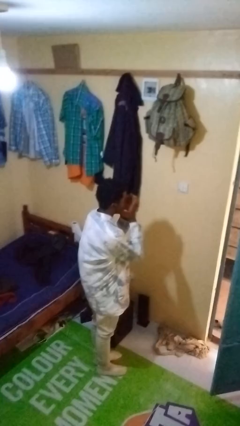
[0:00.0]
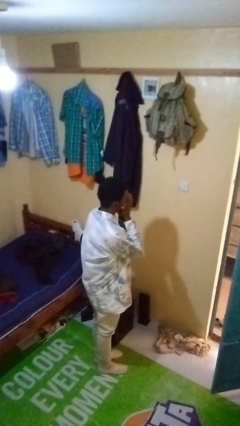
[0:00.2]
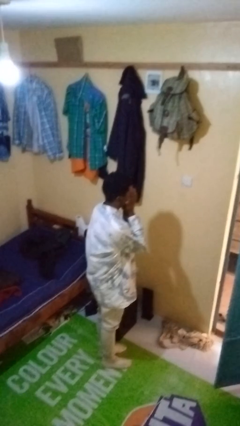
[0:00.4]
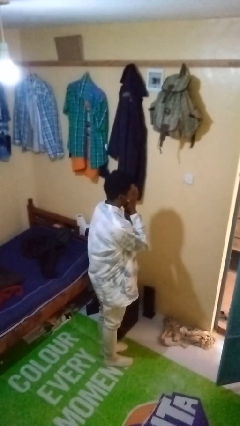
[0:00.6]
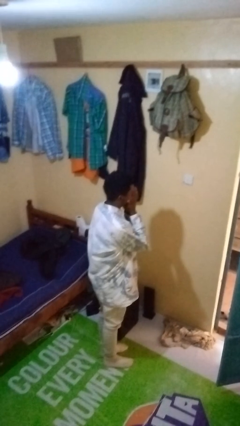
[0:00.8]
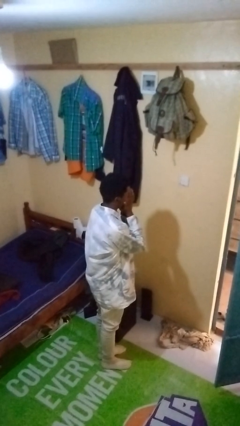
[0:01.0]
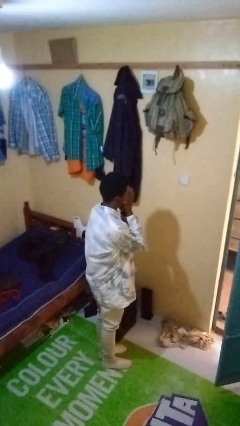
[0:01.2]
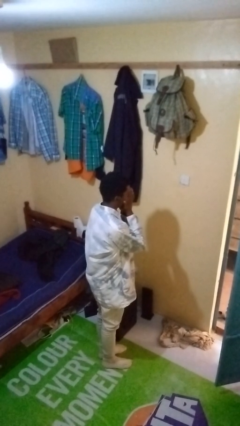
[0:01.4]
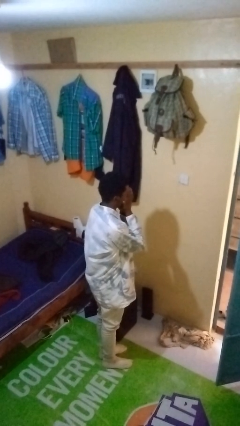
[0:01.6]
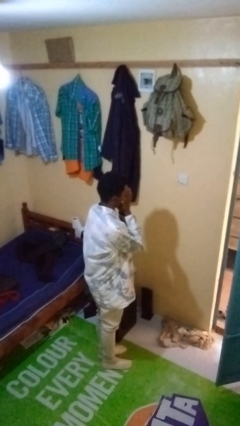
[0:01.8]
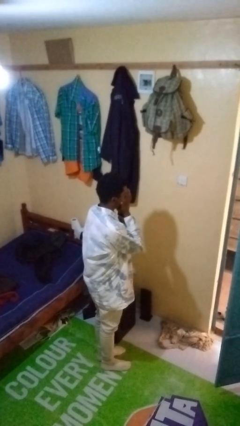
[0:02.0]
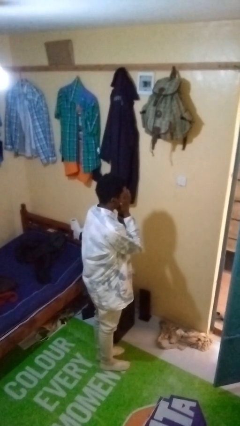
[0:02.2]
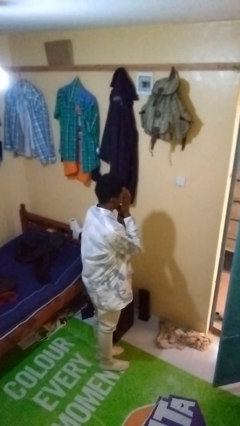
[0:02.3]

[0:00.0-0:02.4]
person covers face with hands

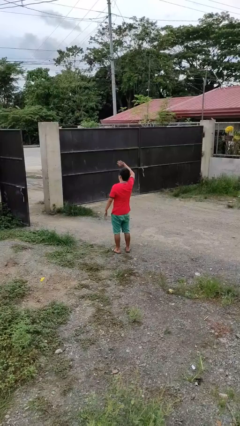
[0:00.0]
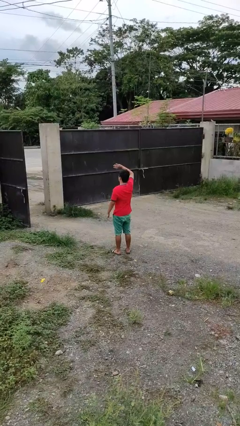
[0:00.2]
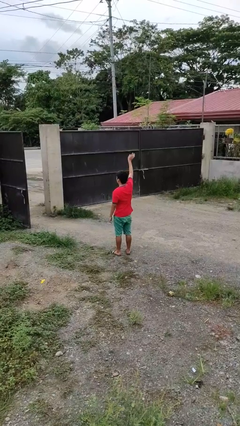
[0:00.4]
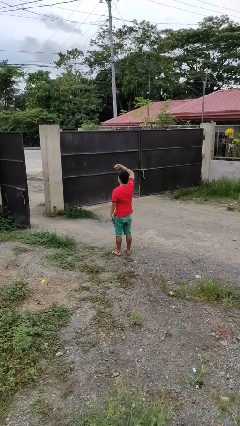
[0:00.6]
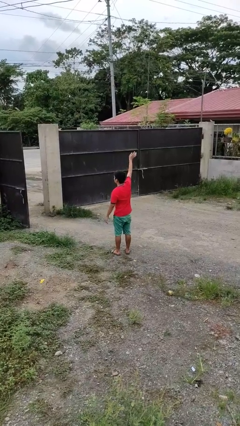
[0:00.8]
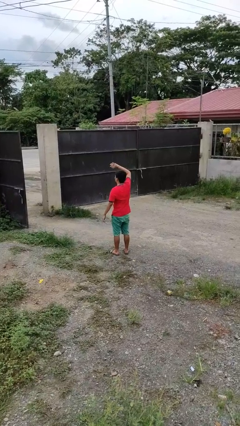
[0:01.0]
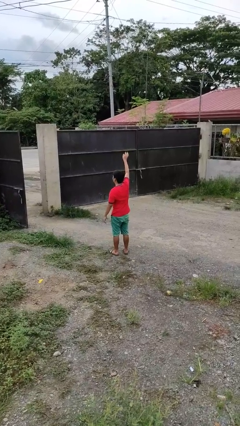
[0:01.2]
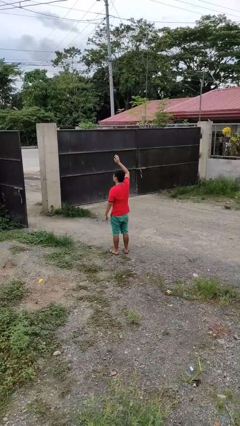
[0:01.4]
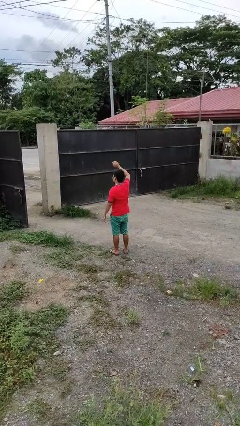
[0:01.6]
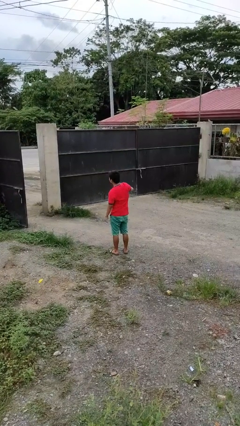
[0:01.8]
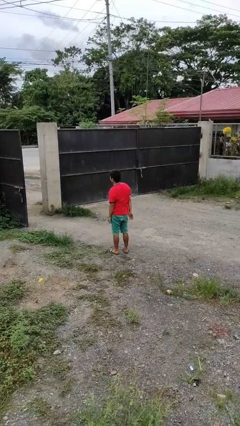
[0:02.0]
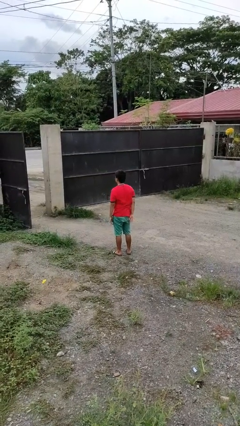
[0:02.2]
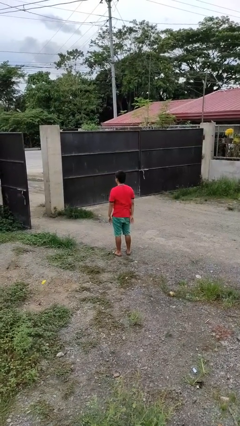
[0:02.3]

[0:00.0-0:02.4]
person waves at person

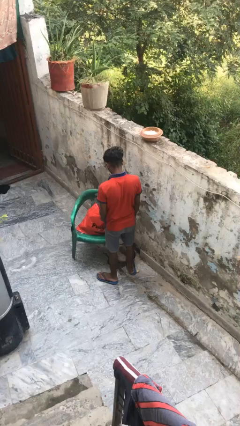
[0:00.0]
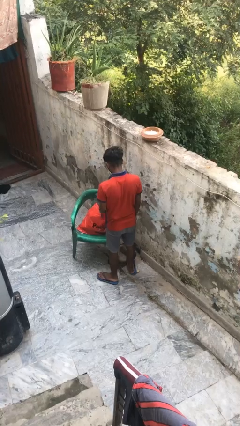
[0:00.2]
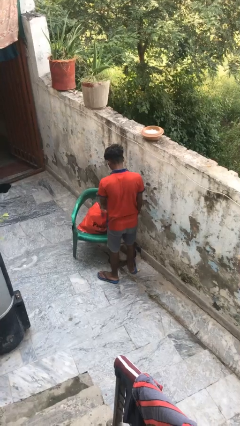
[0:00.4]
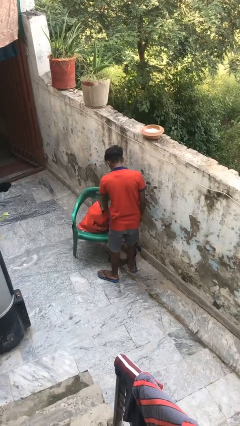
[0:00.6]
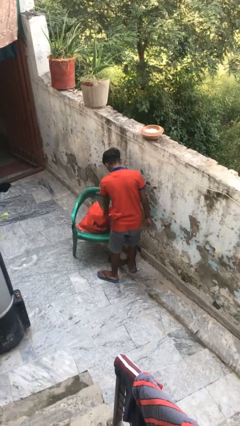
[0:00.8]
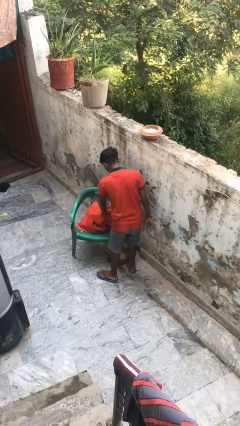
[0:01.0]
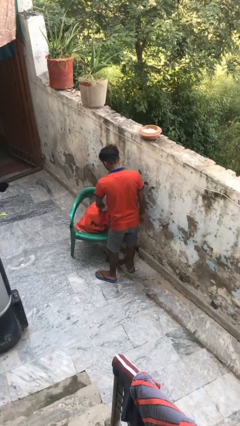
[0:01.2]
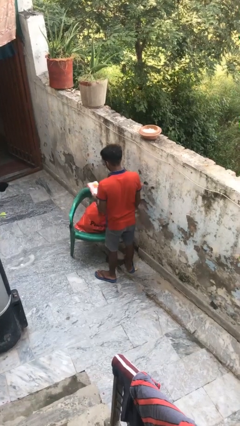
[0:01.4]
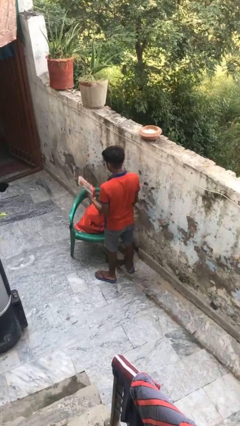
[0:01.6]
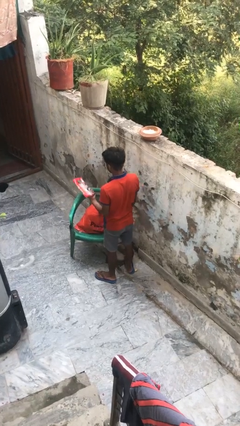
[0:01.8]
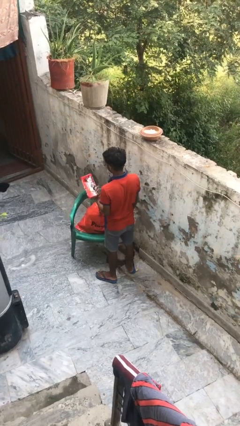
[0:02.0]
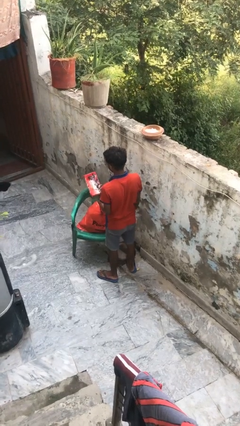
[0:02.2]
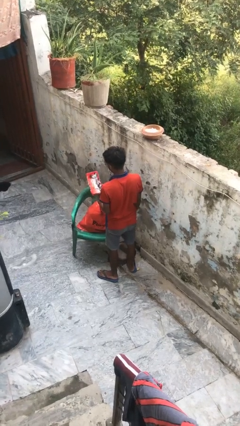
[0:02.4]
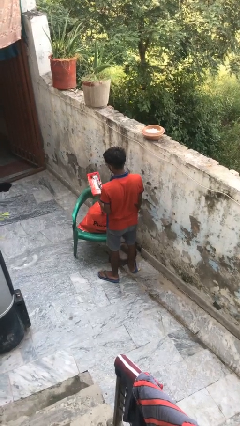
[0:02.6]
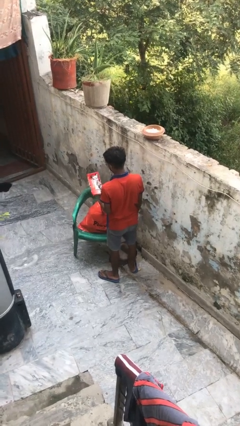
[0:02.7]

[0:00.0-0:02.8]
person takes object from bag

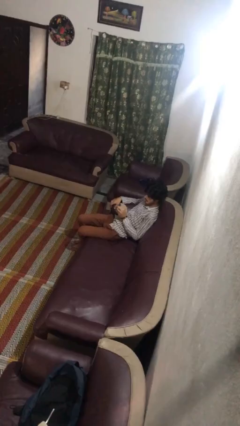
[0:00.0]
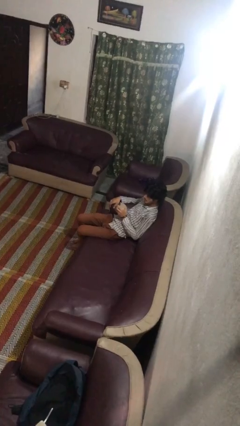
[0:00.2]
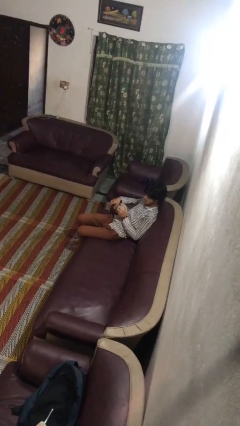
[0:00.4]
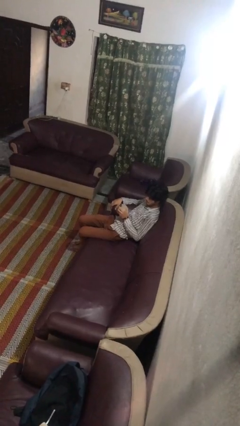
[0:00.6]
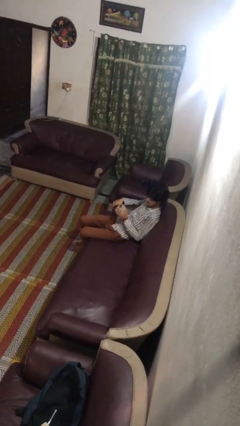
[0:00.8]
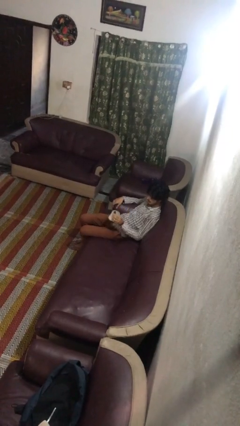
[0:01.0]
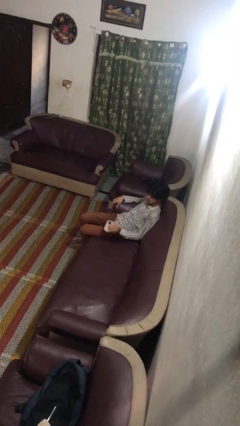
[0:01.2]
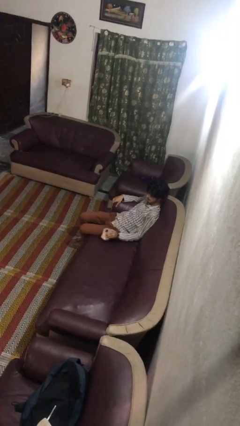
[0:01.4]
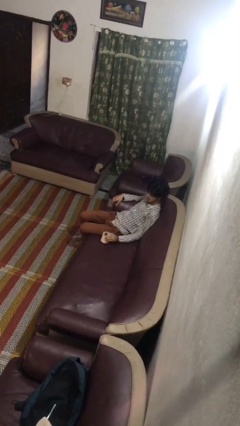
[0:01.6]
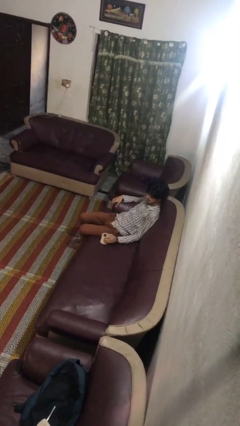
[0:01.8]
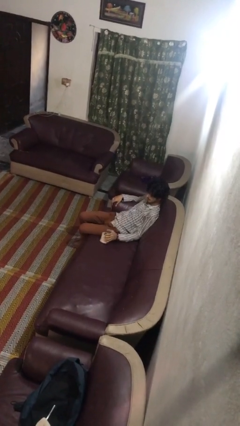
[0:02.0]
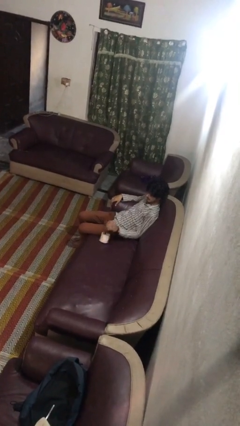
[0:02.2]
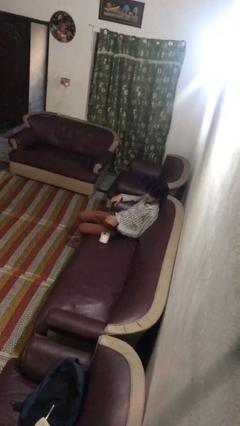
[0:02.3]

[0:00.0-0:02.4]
person puts down object on couch

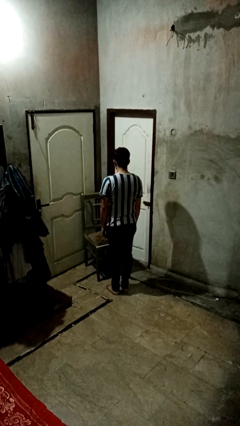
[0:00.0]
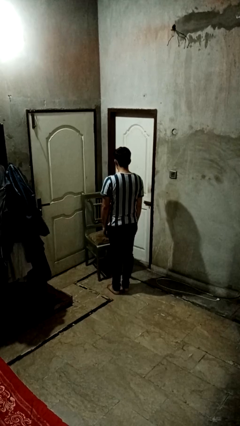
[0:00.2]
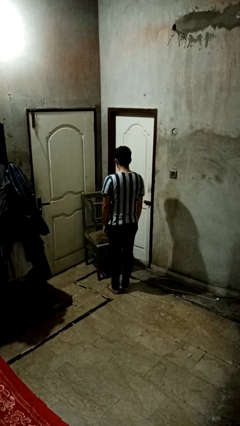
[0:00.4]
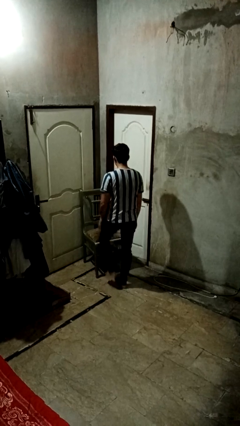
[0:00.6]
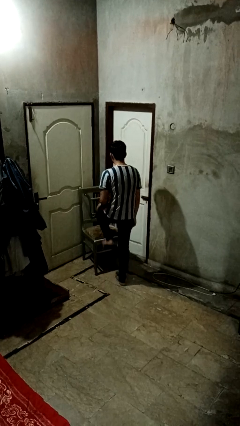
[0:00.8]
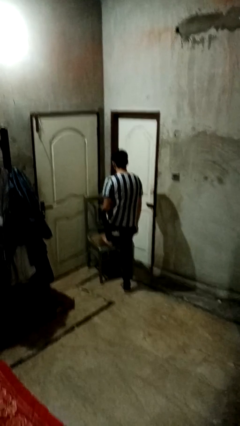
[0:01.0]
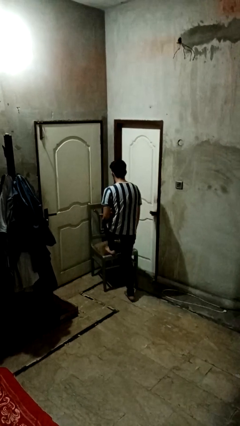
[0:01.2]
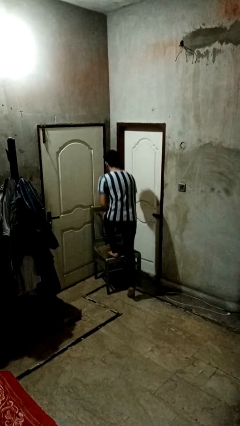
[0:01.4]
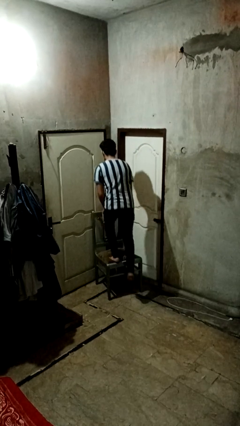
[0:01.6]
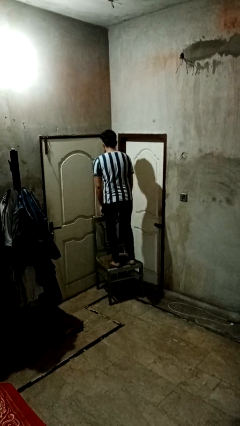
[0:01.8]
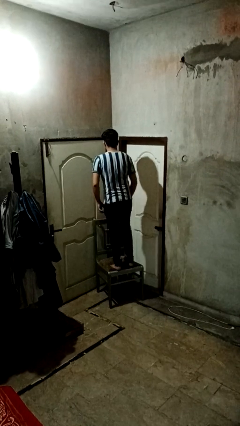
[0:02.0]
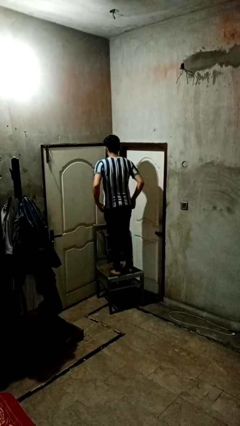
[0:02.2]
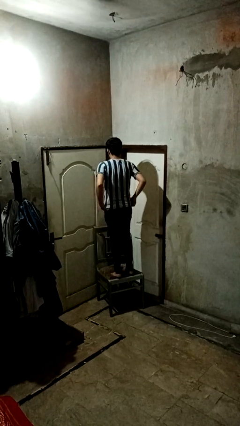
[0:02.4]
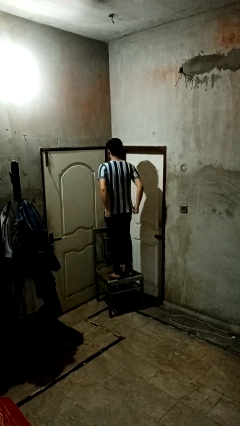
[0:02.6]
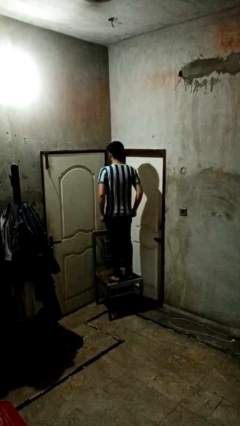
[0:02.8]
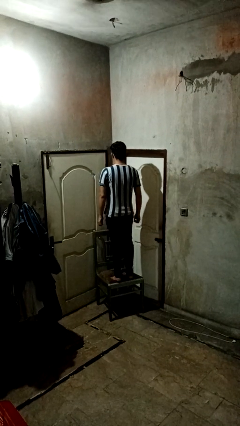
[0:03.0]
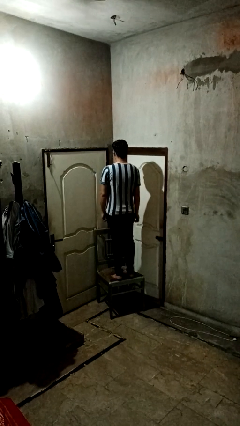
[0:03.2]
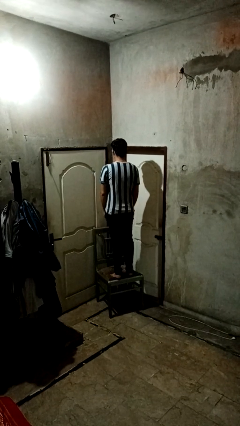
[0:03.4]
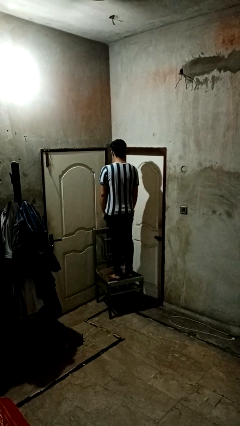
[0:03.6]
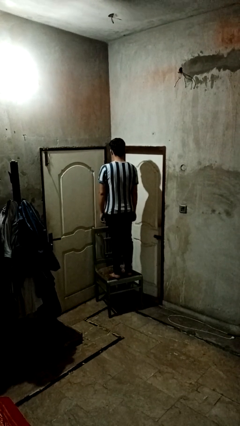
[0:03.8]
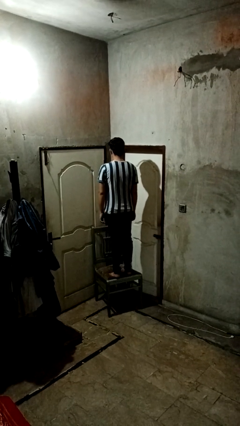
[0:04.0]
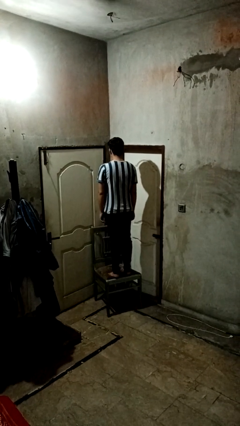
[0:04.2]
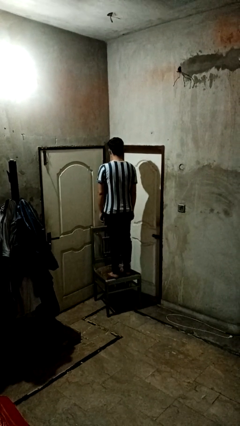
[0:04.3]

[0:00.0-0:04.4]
person climbs on chair

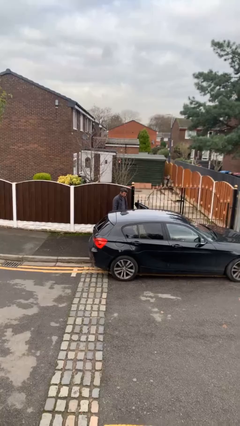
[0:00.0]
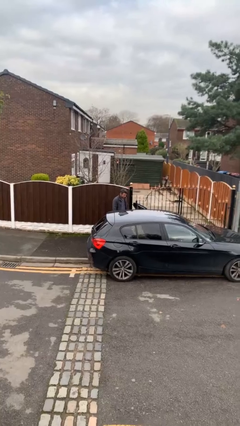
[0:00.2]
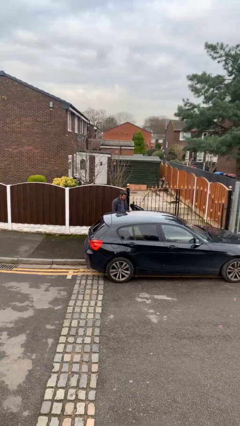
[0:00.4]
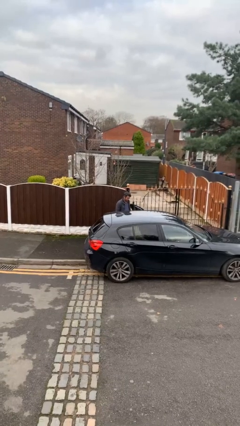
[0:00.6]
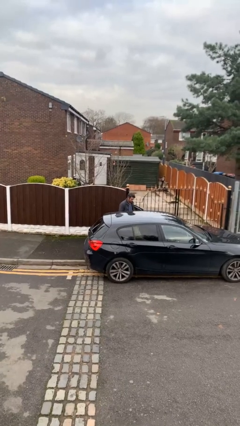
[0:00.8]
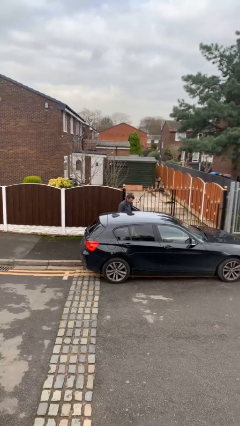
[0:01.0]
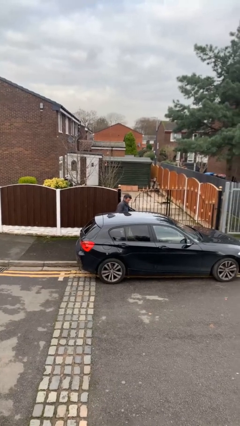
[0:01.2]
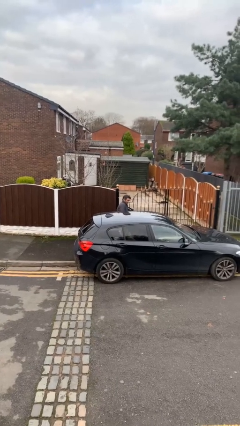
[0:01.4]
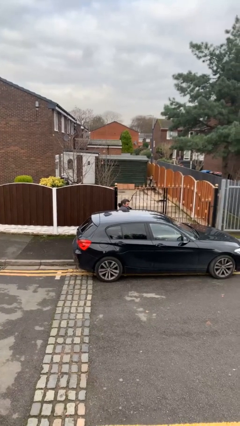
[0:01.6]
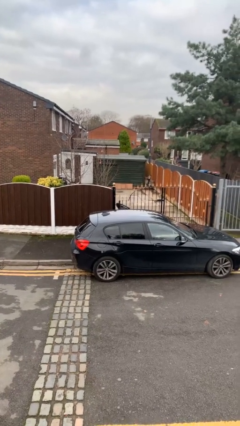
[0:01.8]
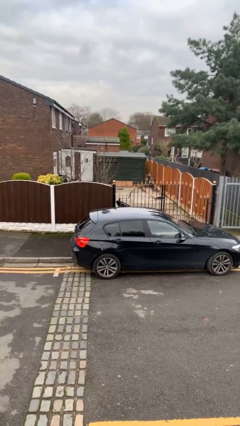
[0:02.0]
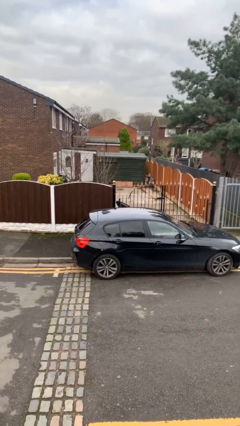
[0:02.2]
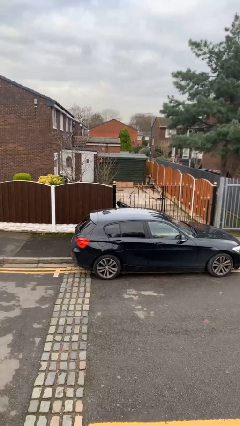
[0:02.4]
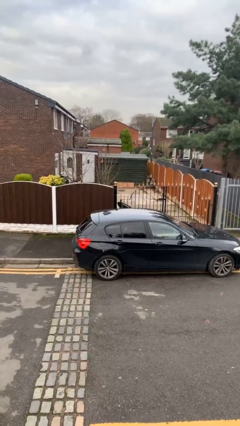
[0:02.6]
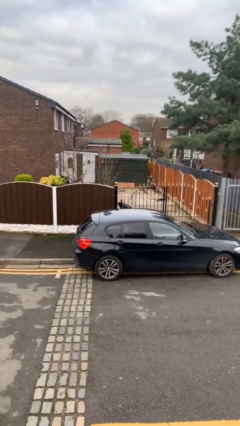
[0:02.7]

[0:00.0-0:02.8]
person enters car

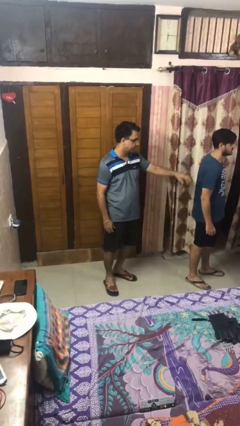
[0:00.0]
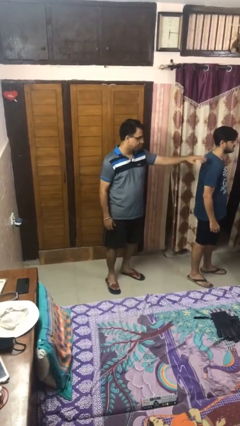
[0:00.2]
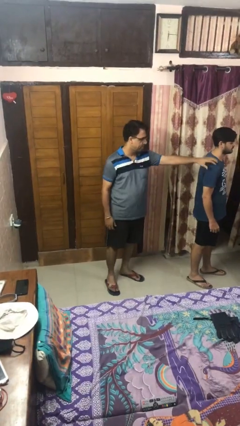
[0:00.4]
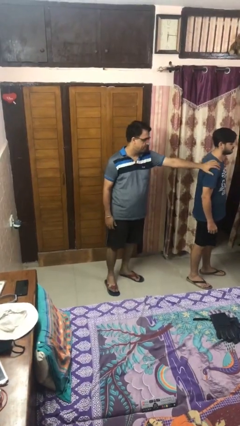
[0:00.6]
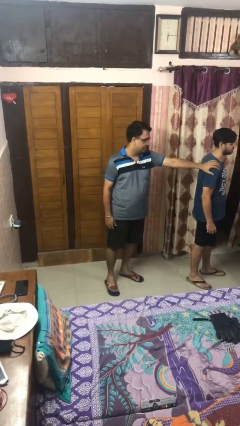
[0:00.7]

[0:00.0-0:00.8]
person grabs person by shoulder
